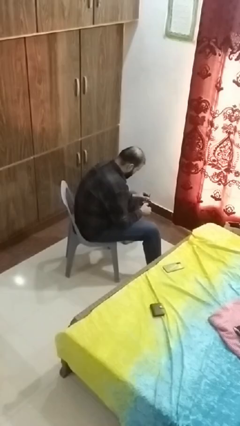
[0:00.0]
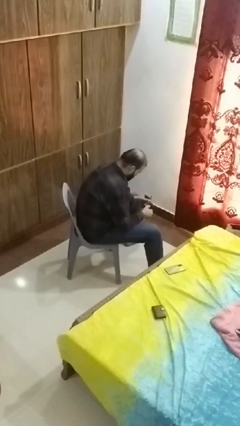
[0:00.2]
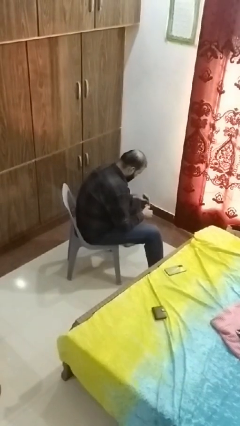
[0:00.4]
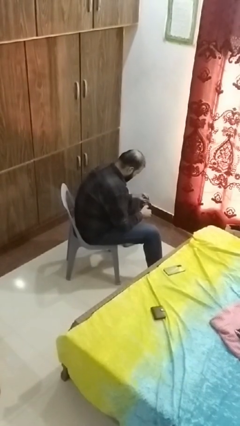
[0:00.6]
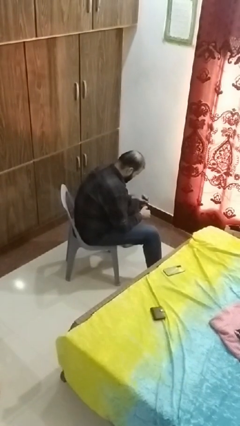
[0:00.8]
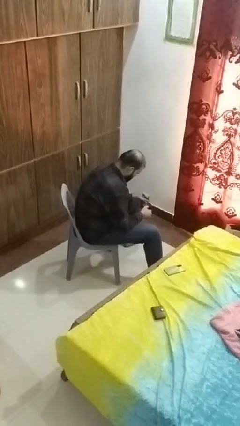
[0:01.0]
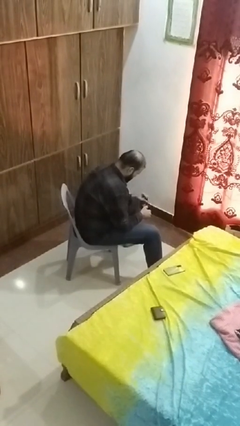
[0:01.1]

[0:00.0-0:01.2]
person stirs mug

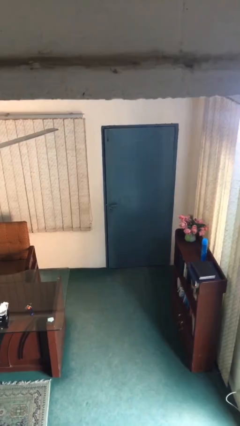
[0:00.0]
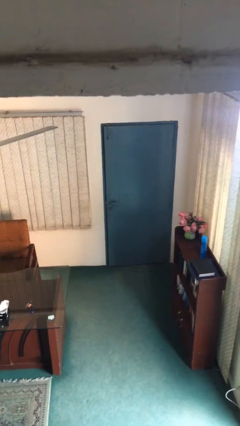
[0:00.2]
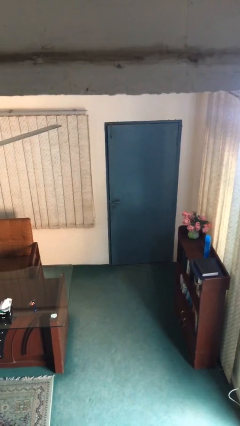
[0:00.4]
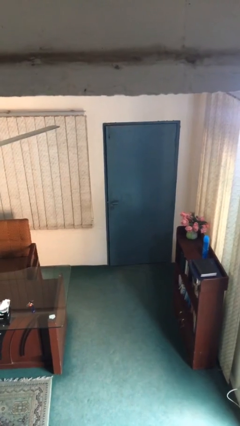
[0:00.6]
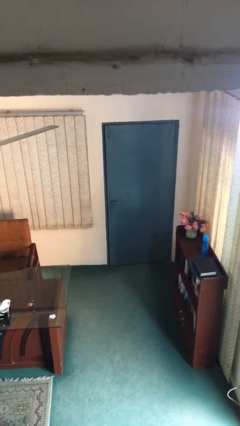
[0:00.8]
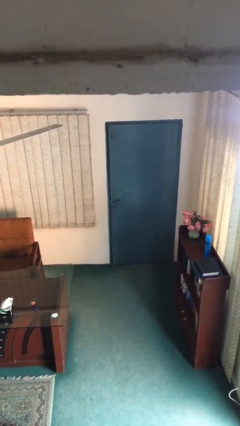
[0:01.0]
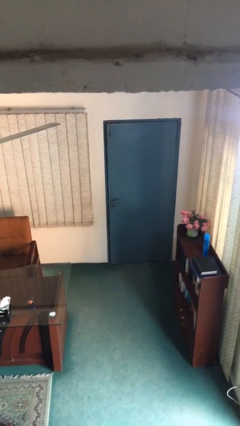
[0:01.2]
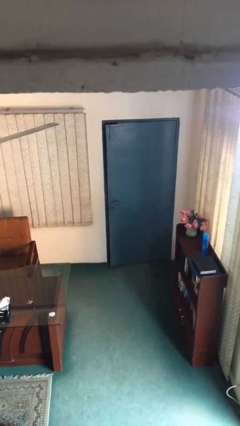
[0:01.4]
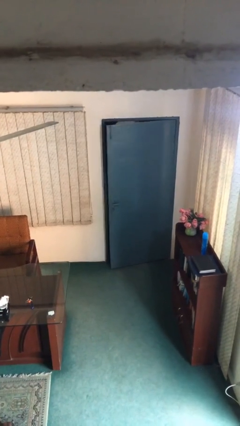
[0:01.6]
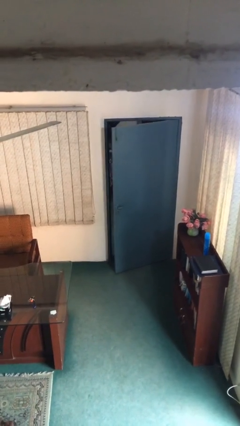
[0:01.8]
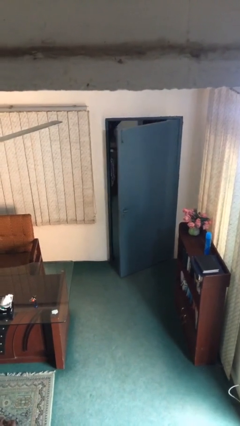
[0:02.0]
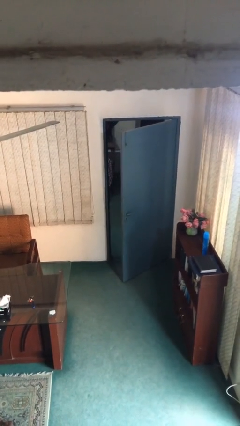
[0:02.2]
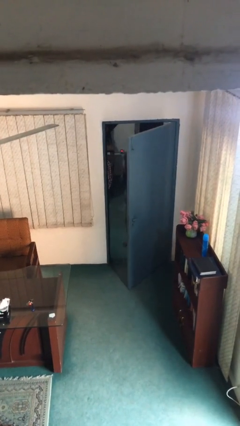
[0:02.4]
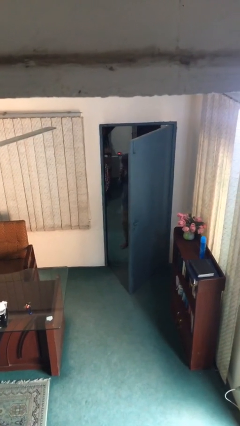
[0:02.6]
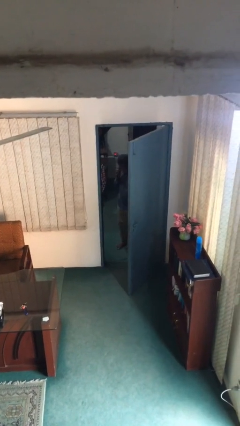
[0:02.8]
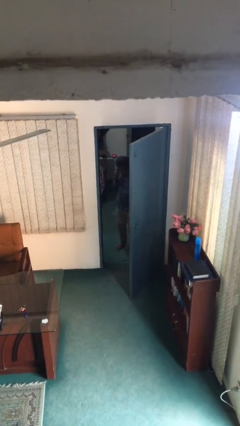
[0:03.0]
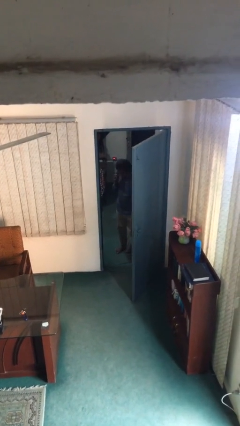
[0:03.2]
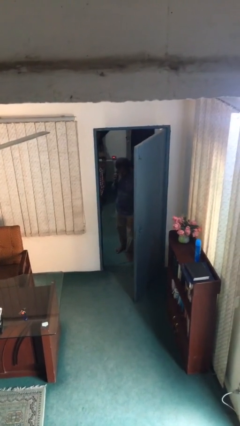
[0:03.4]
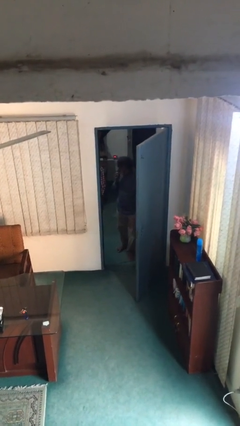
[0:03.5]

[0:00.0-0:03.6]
person opens facility door

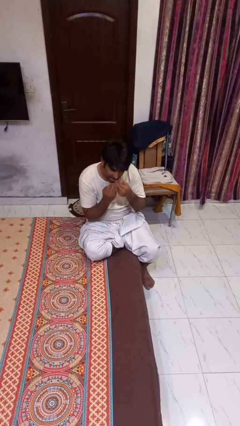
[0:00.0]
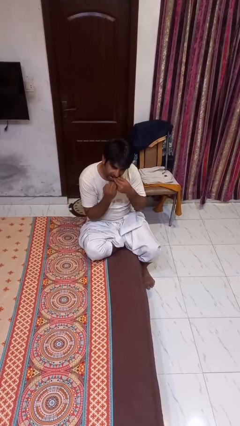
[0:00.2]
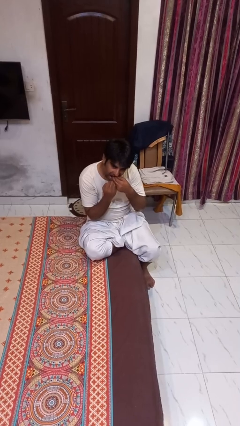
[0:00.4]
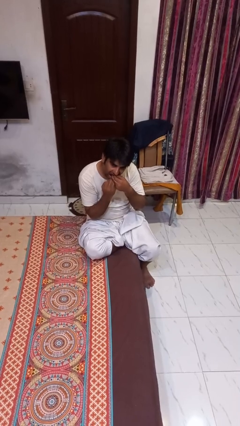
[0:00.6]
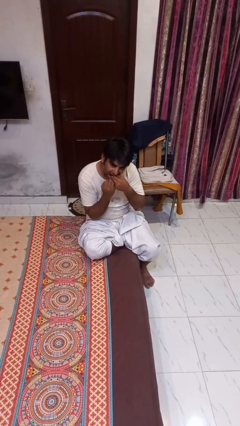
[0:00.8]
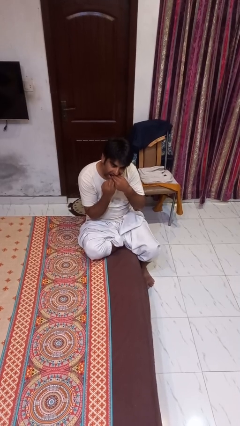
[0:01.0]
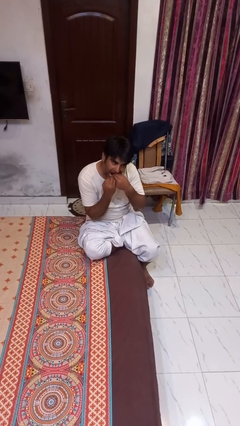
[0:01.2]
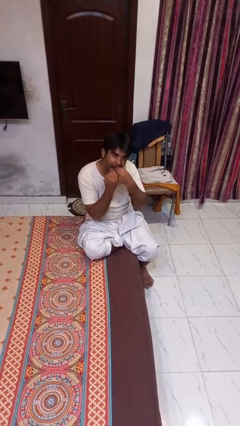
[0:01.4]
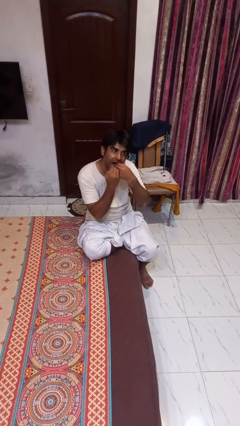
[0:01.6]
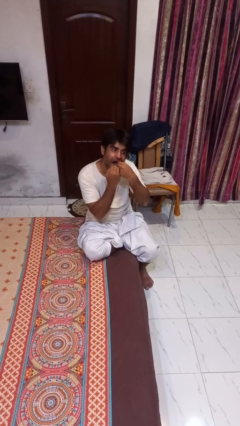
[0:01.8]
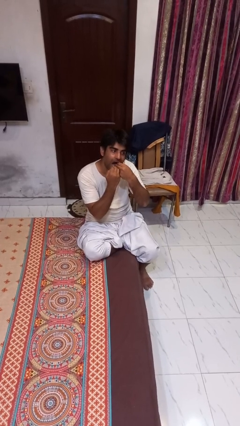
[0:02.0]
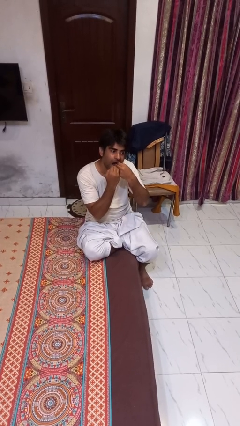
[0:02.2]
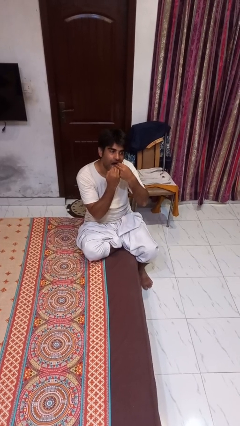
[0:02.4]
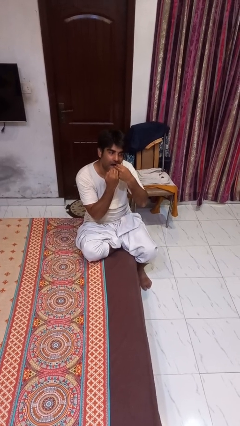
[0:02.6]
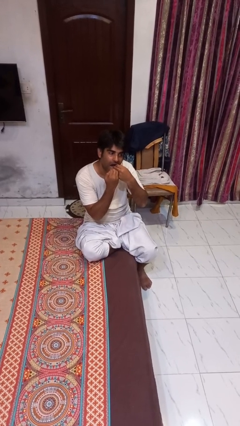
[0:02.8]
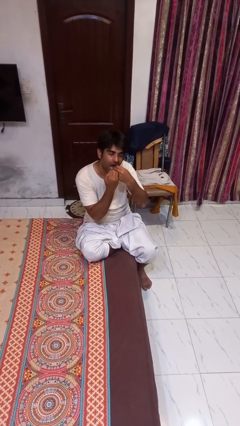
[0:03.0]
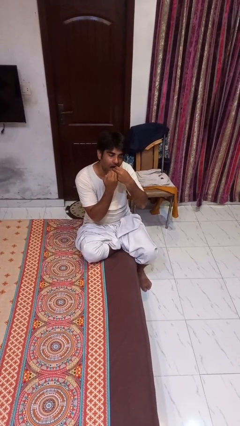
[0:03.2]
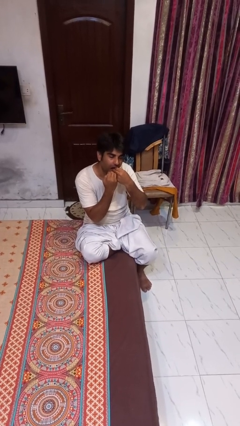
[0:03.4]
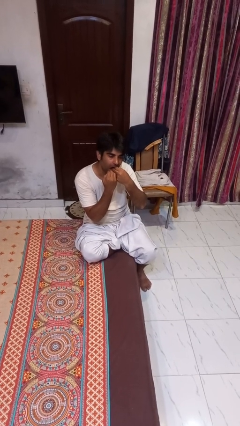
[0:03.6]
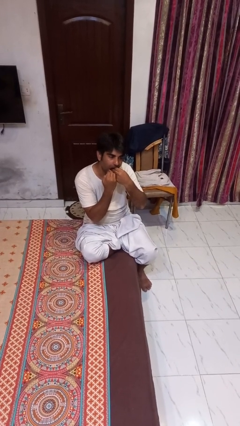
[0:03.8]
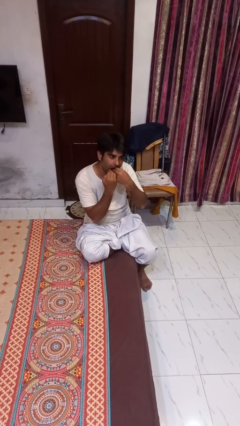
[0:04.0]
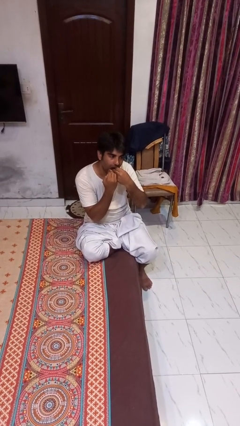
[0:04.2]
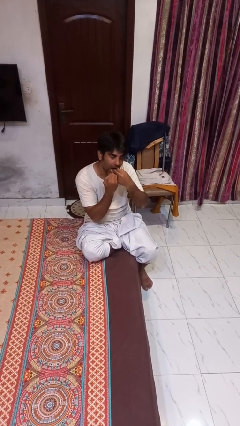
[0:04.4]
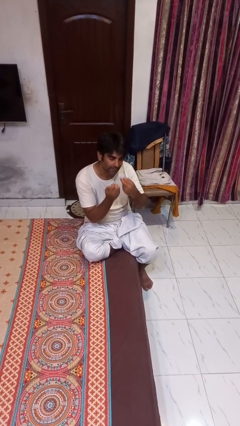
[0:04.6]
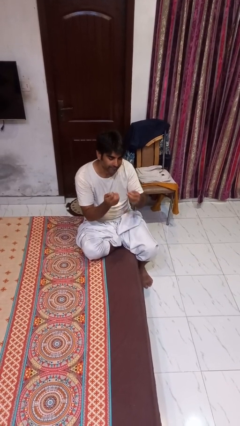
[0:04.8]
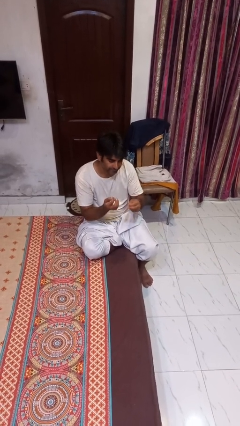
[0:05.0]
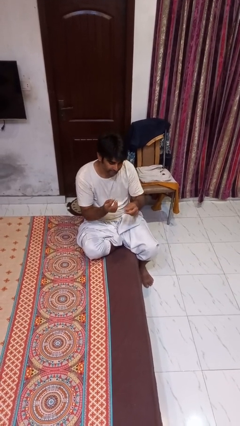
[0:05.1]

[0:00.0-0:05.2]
person flosses

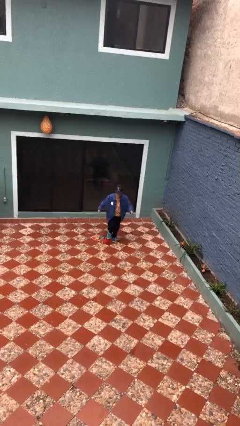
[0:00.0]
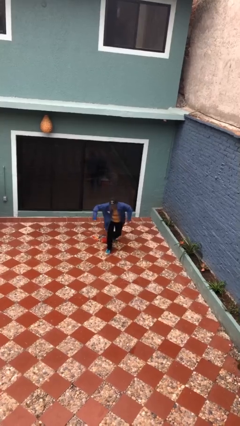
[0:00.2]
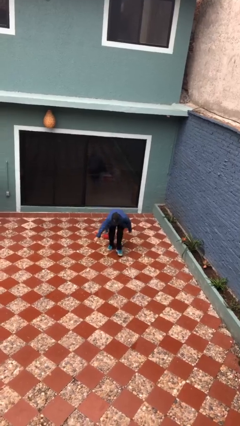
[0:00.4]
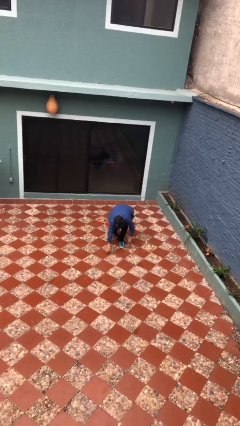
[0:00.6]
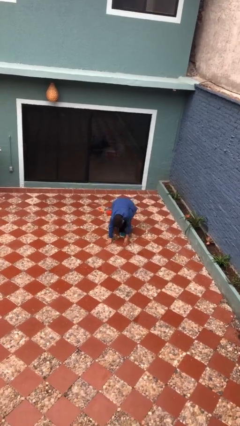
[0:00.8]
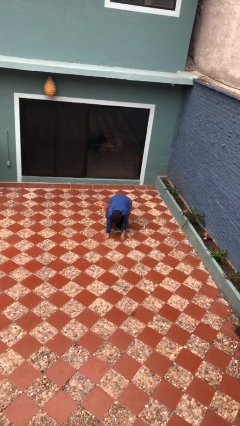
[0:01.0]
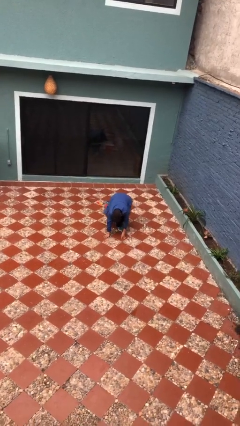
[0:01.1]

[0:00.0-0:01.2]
person trips on object on floor

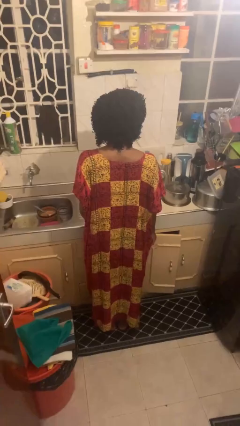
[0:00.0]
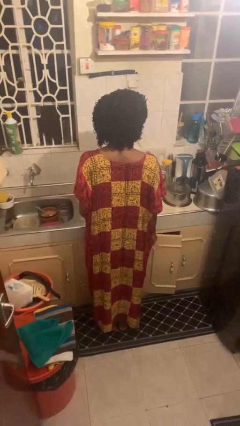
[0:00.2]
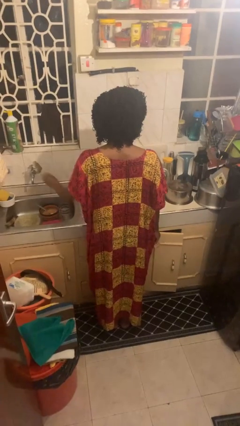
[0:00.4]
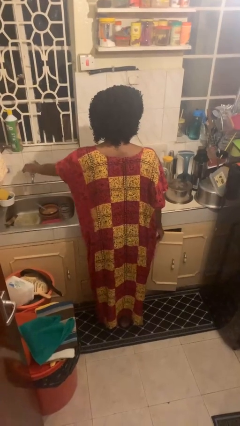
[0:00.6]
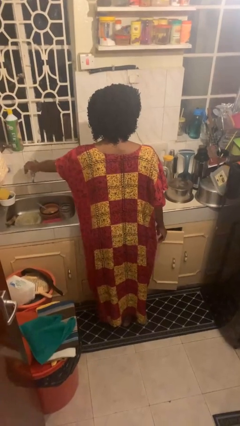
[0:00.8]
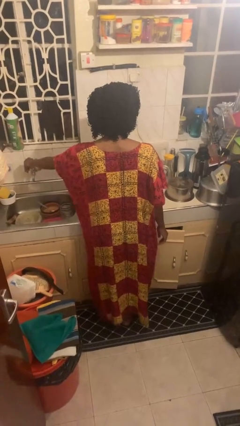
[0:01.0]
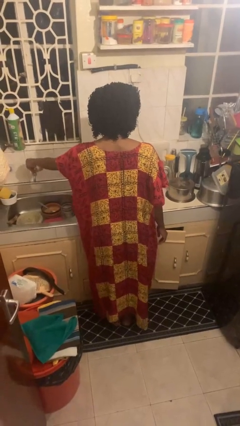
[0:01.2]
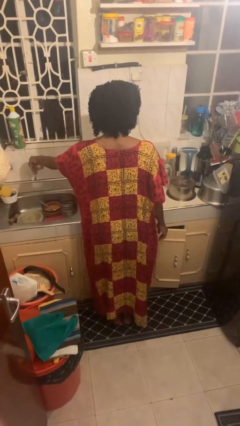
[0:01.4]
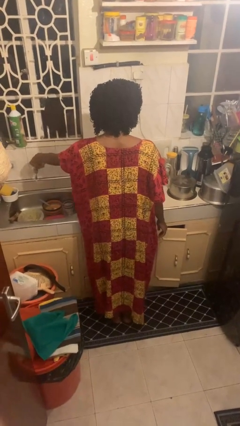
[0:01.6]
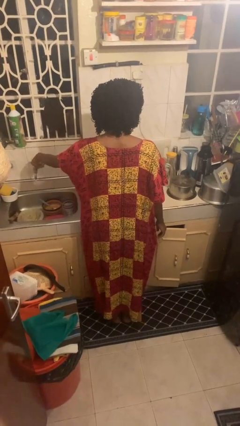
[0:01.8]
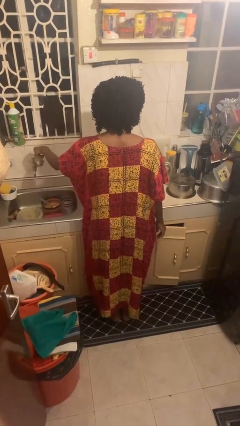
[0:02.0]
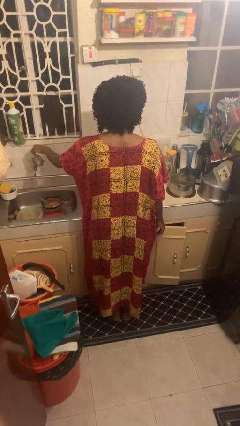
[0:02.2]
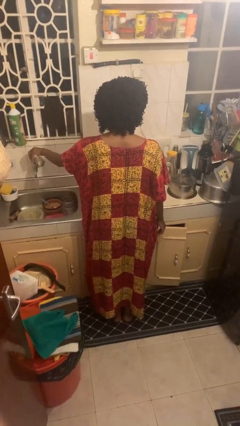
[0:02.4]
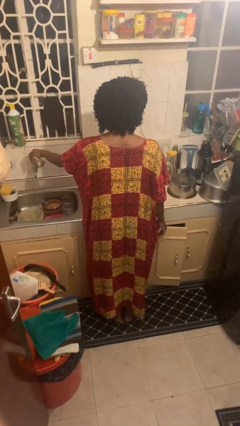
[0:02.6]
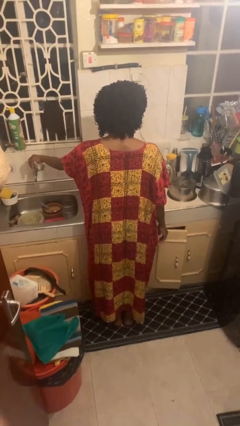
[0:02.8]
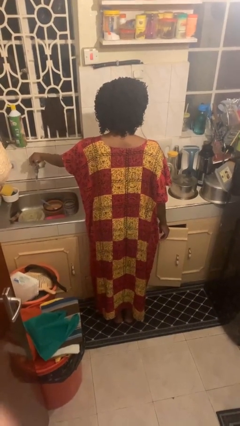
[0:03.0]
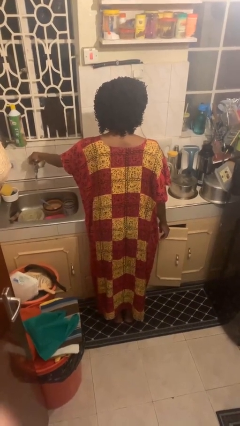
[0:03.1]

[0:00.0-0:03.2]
person turns on faucet

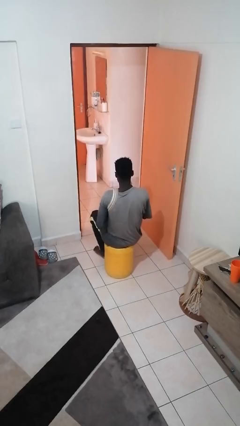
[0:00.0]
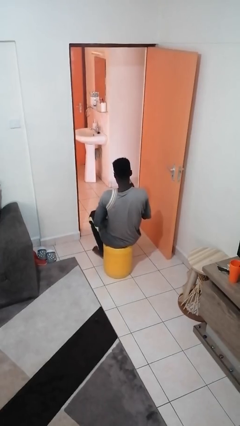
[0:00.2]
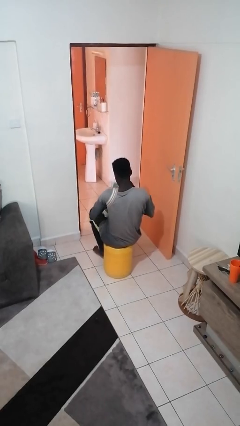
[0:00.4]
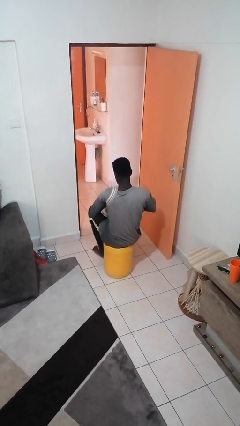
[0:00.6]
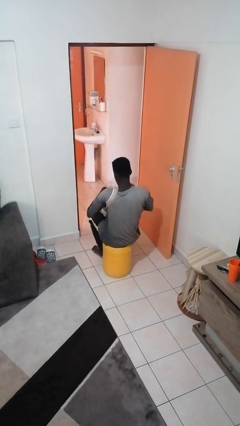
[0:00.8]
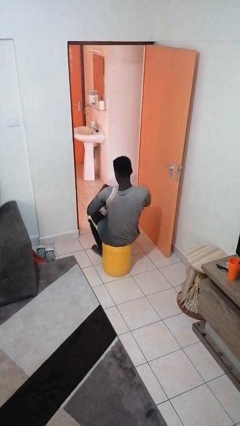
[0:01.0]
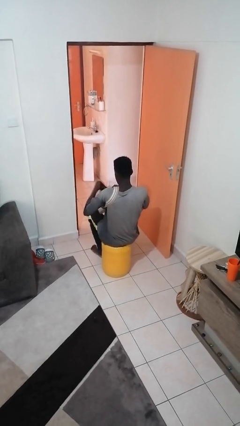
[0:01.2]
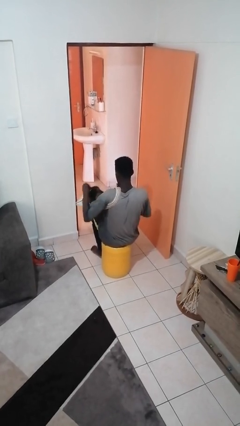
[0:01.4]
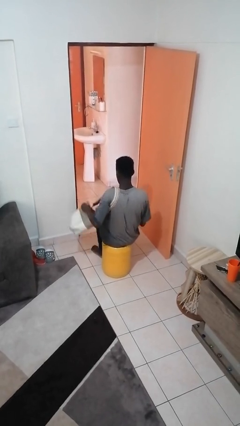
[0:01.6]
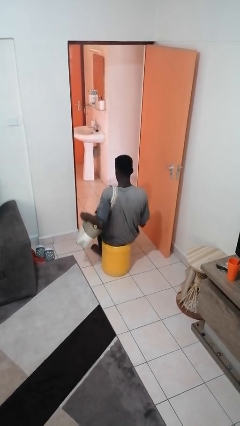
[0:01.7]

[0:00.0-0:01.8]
person puts object into purse

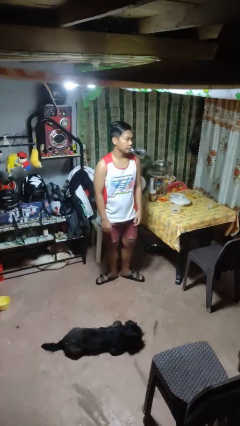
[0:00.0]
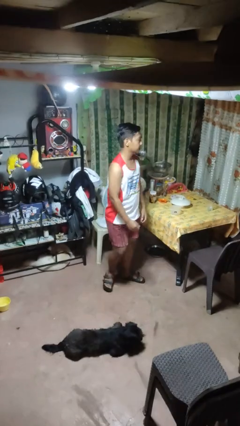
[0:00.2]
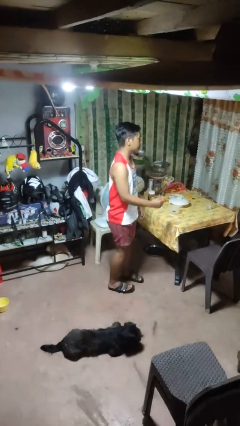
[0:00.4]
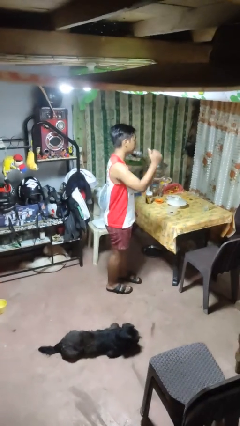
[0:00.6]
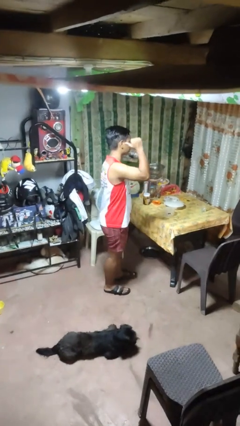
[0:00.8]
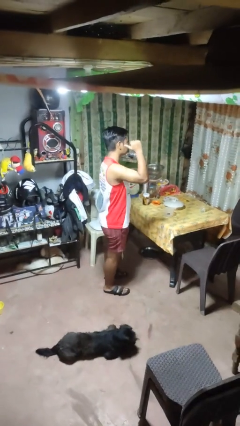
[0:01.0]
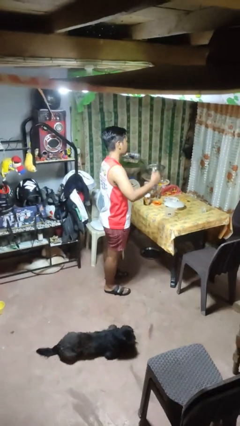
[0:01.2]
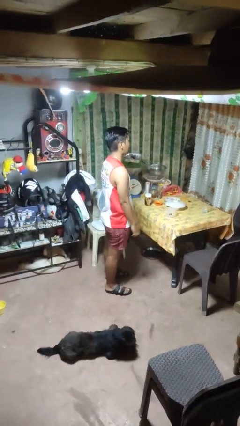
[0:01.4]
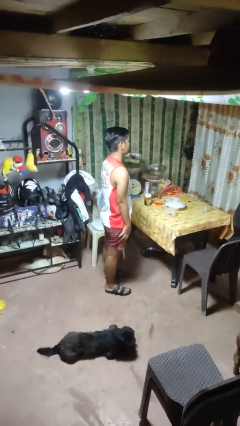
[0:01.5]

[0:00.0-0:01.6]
person gestures behind me
